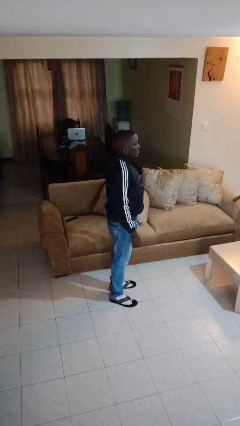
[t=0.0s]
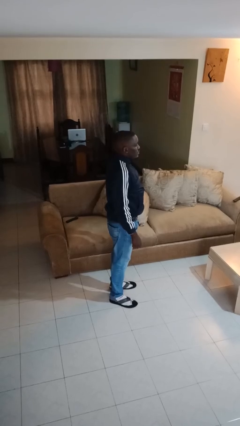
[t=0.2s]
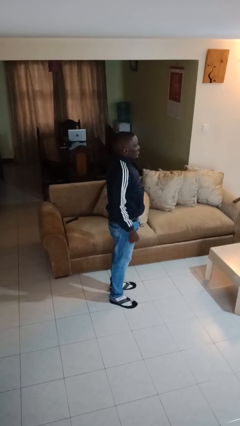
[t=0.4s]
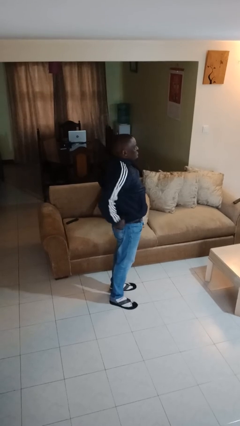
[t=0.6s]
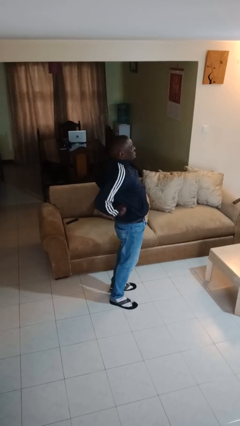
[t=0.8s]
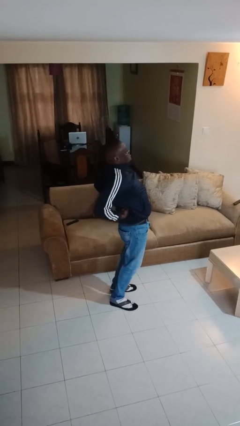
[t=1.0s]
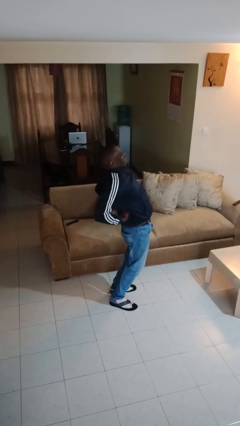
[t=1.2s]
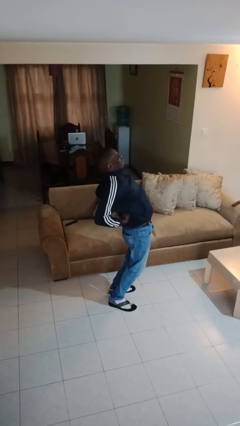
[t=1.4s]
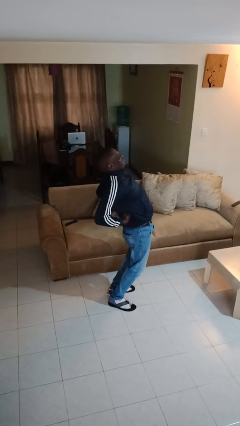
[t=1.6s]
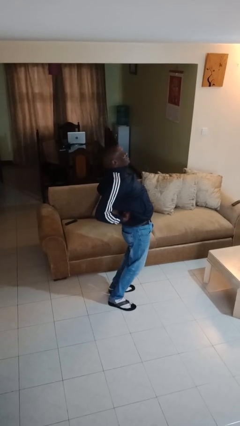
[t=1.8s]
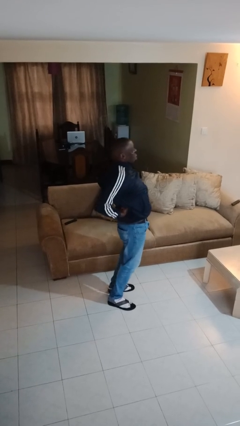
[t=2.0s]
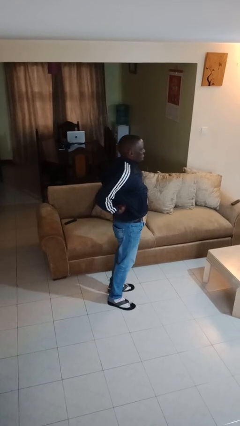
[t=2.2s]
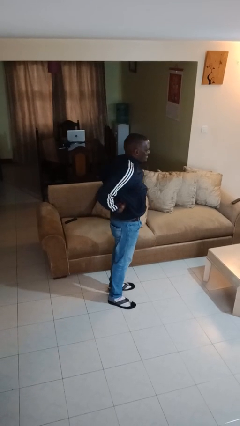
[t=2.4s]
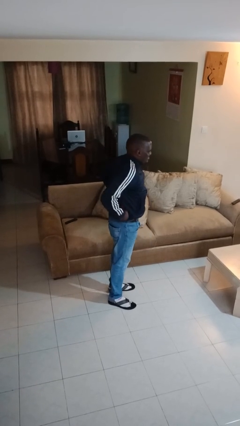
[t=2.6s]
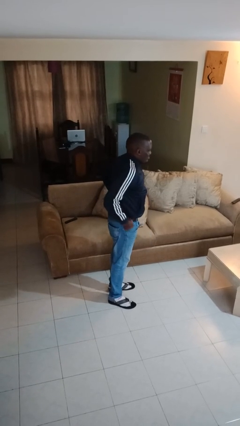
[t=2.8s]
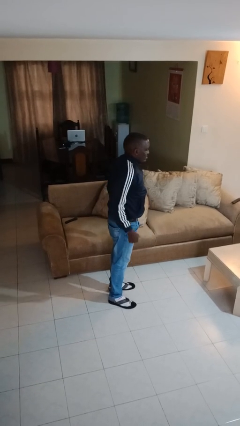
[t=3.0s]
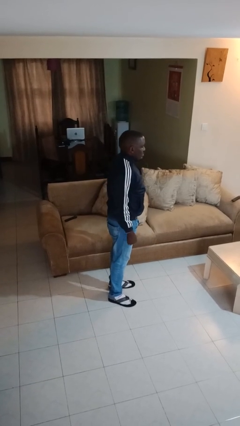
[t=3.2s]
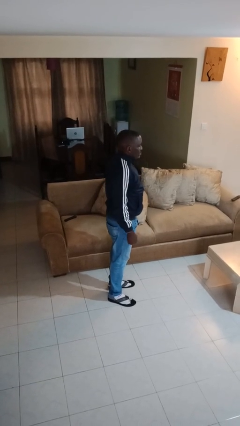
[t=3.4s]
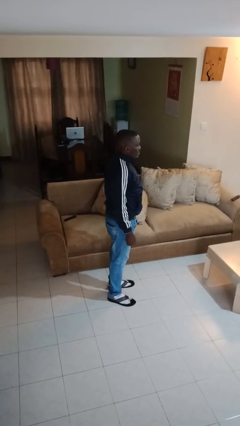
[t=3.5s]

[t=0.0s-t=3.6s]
person stretches back

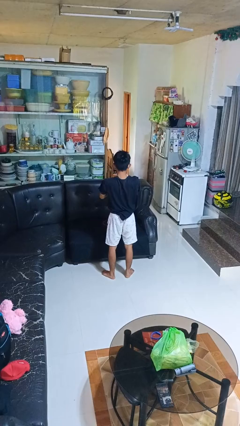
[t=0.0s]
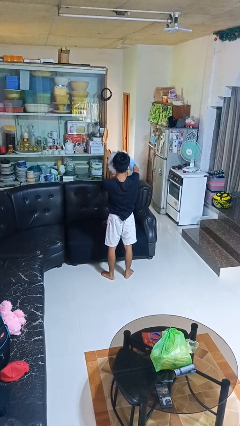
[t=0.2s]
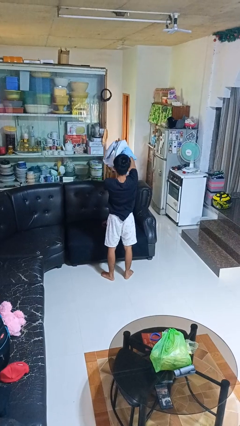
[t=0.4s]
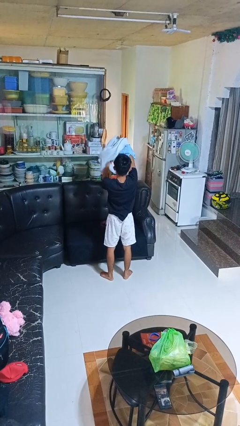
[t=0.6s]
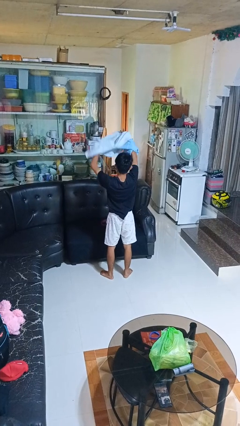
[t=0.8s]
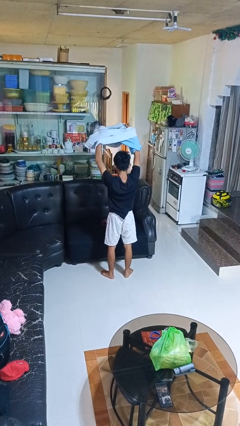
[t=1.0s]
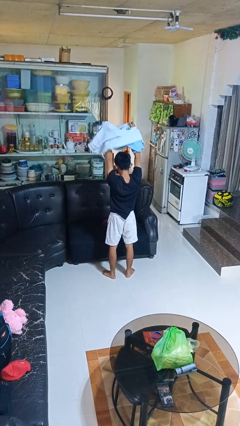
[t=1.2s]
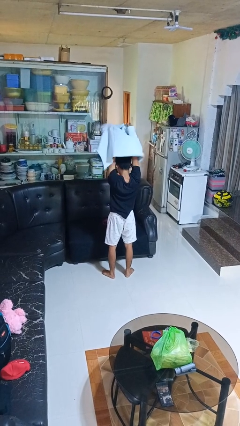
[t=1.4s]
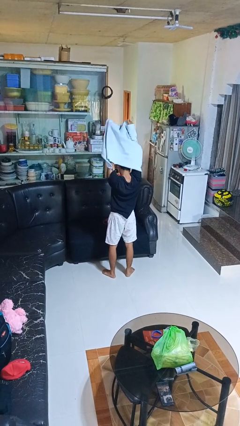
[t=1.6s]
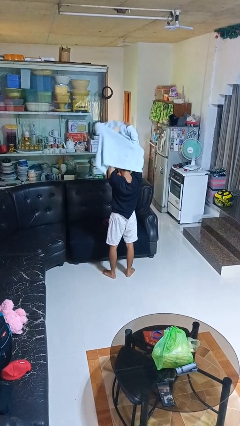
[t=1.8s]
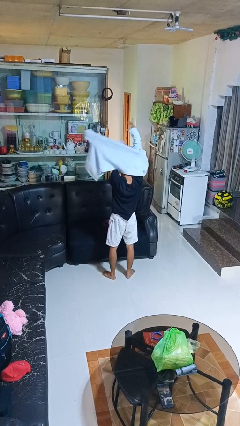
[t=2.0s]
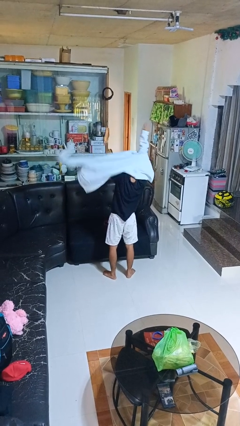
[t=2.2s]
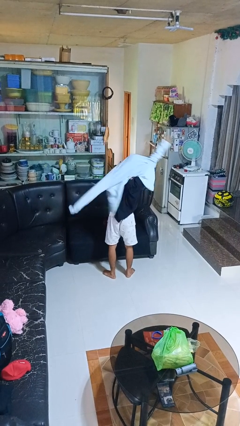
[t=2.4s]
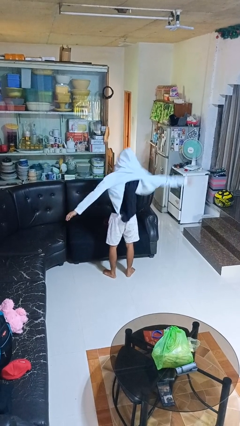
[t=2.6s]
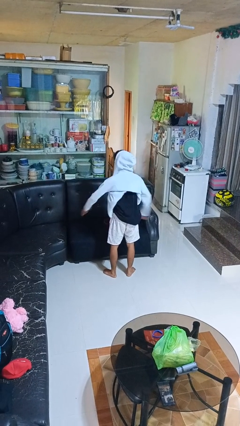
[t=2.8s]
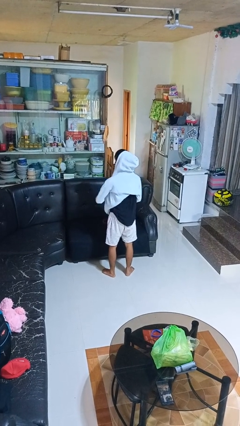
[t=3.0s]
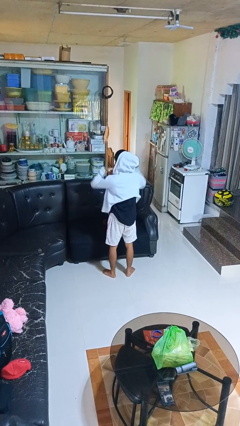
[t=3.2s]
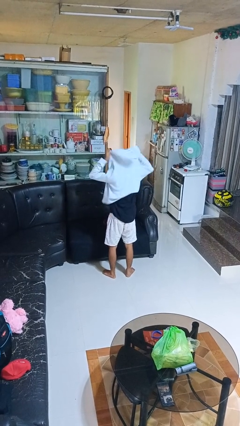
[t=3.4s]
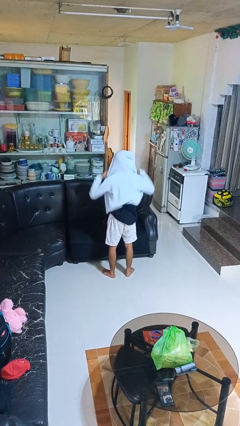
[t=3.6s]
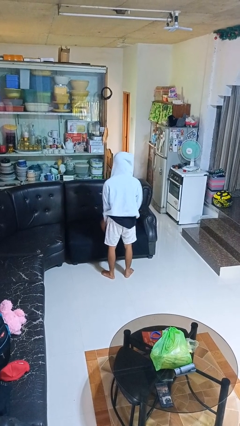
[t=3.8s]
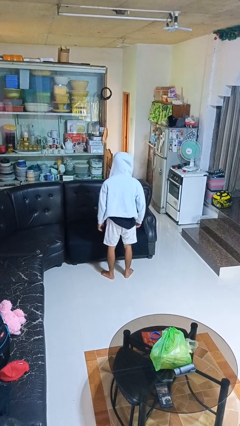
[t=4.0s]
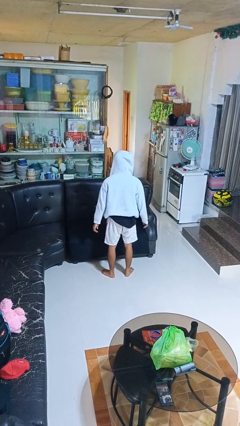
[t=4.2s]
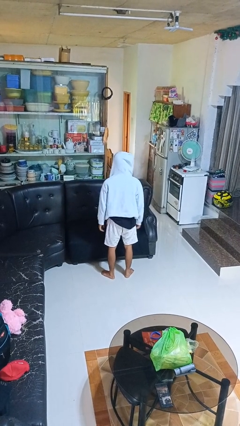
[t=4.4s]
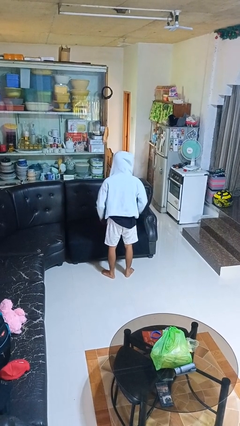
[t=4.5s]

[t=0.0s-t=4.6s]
person puts on hoodie

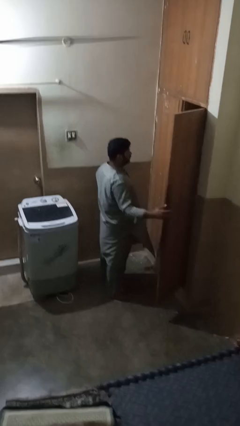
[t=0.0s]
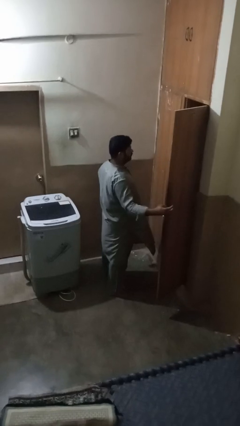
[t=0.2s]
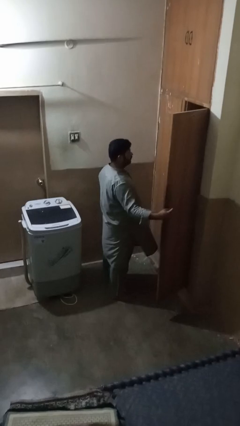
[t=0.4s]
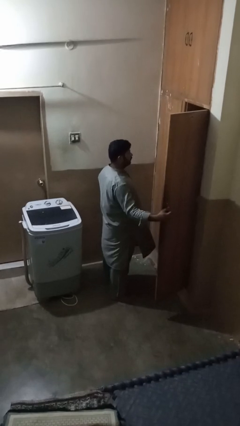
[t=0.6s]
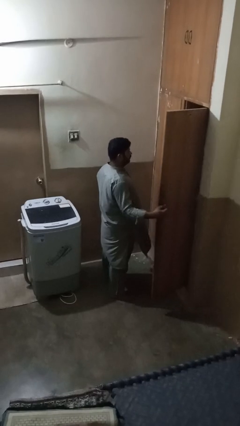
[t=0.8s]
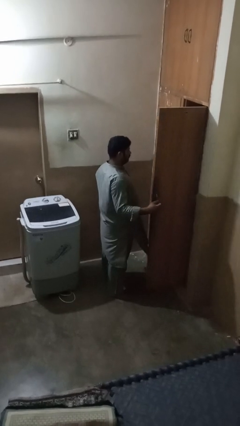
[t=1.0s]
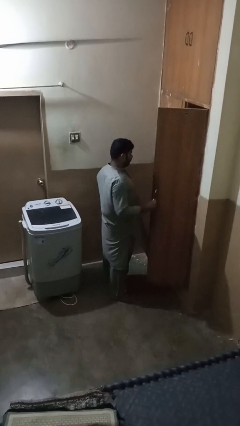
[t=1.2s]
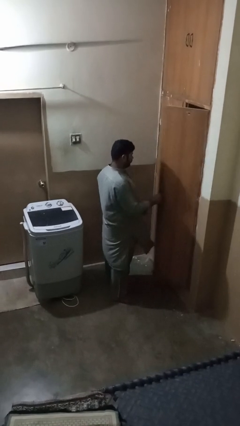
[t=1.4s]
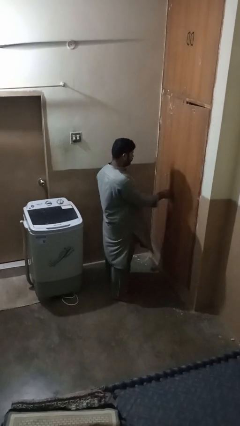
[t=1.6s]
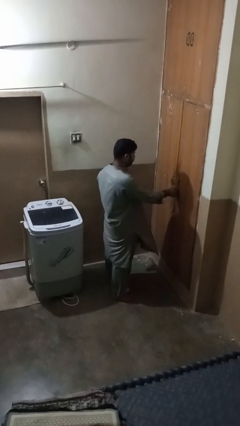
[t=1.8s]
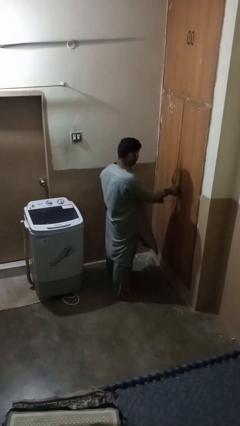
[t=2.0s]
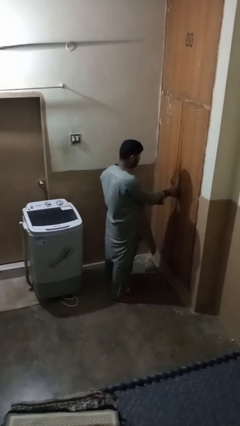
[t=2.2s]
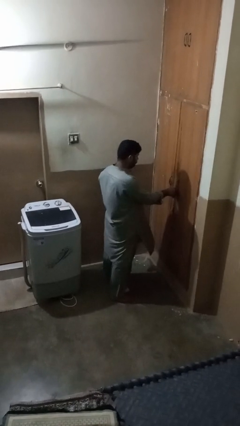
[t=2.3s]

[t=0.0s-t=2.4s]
person closes closet door

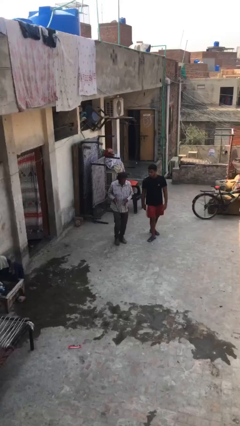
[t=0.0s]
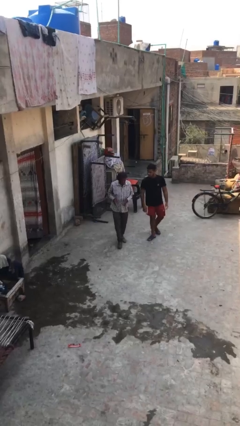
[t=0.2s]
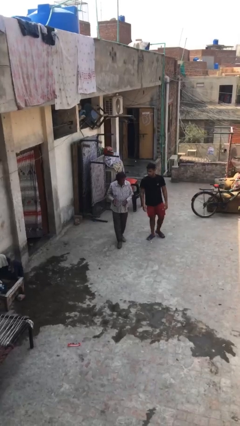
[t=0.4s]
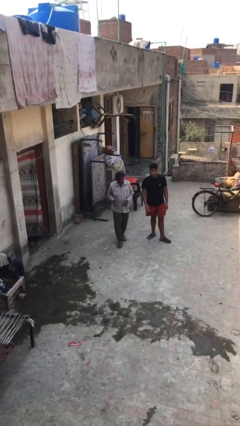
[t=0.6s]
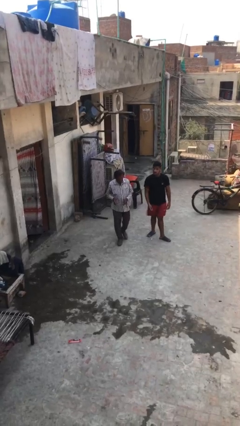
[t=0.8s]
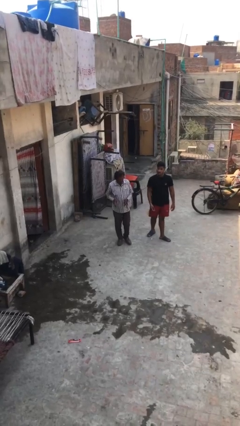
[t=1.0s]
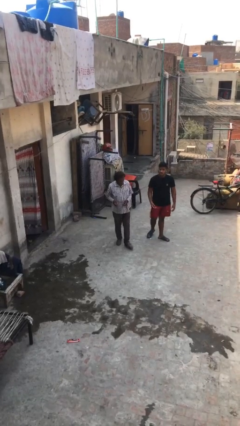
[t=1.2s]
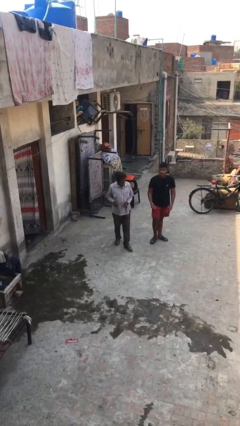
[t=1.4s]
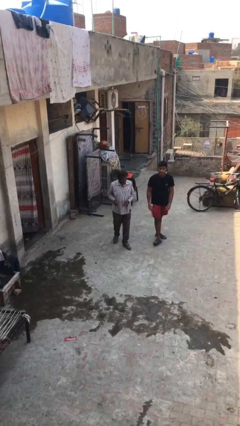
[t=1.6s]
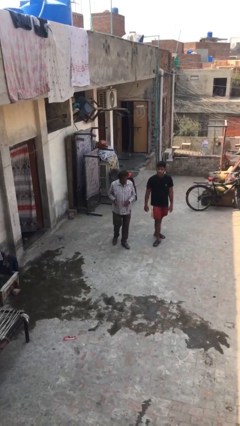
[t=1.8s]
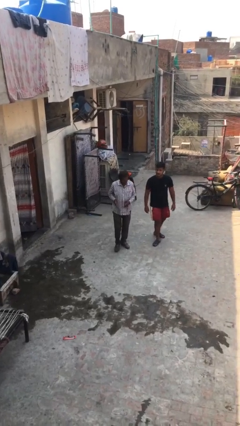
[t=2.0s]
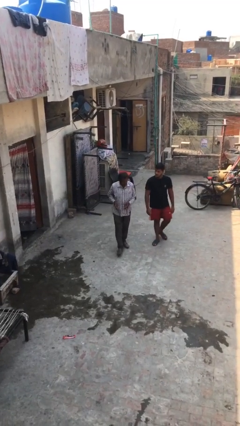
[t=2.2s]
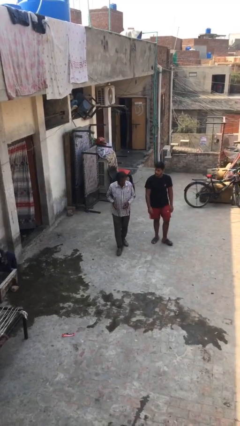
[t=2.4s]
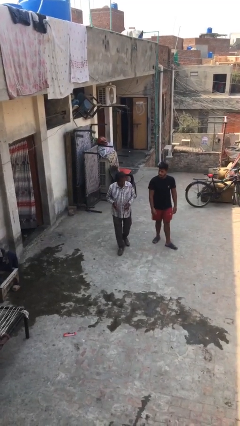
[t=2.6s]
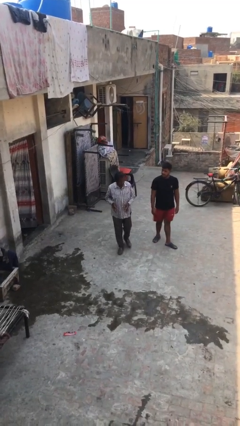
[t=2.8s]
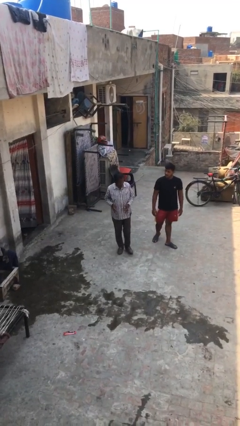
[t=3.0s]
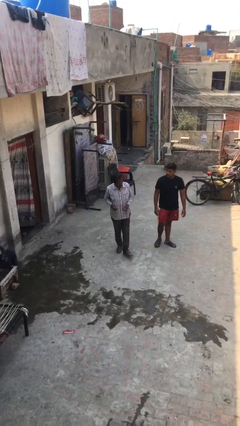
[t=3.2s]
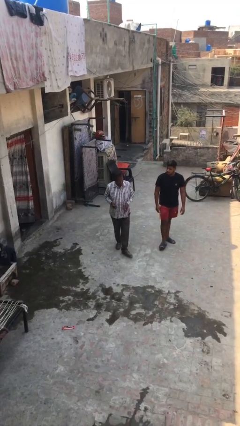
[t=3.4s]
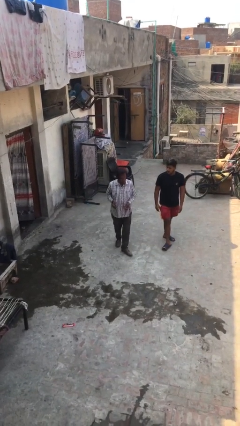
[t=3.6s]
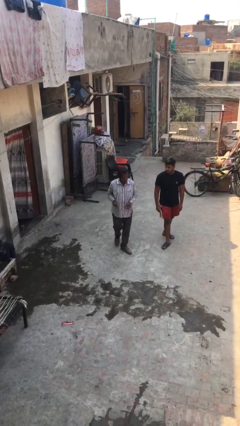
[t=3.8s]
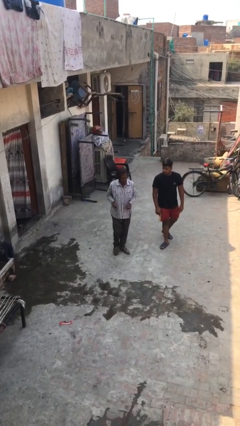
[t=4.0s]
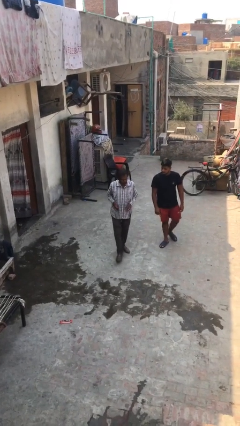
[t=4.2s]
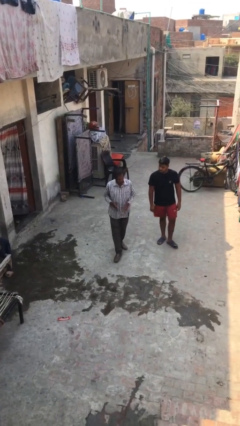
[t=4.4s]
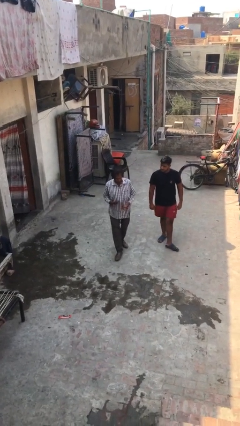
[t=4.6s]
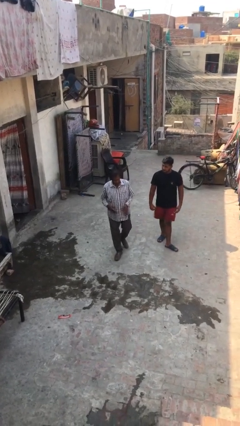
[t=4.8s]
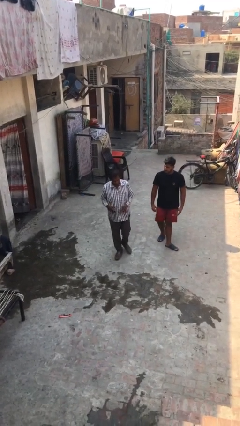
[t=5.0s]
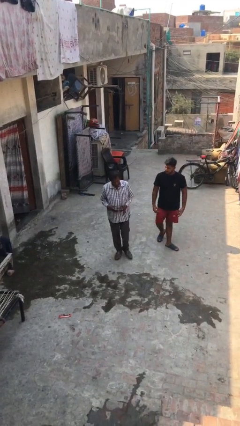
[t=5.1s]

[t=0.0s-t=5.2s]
person talks to person

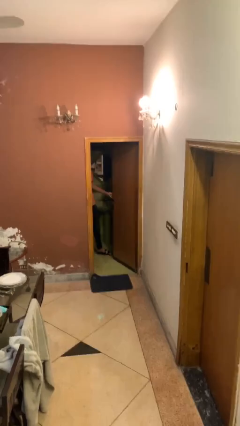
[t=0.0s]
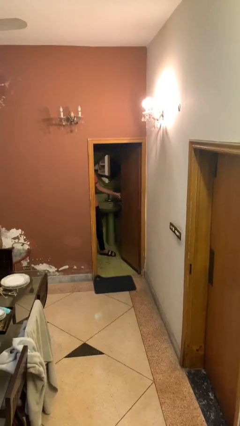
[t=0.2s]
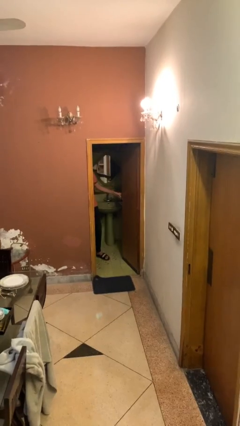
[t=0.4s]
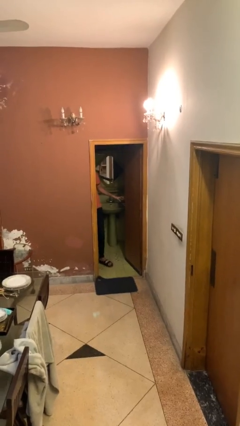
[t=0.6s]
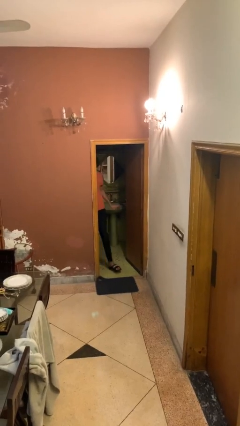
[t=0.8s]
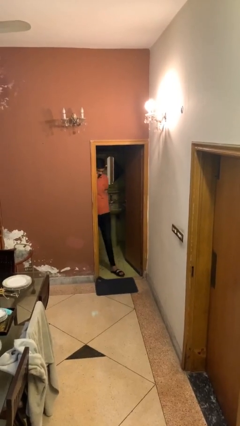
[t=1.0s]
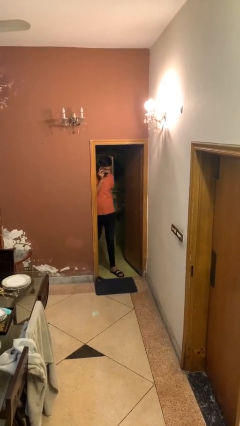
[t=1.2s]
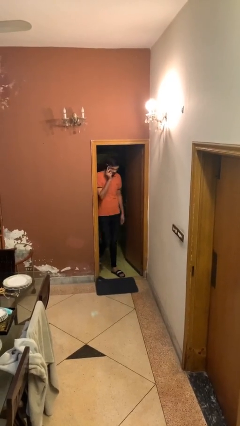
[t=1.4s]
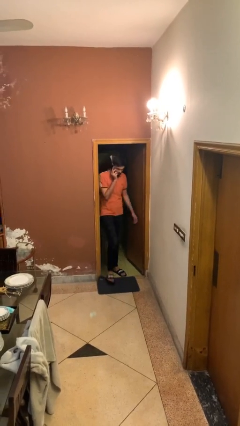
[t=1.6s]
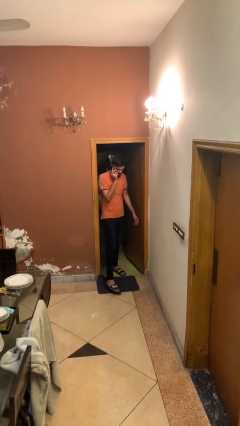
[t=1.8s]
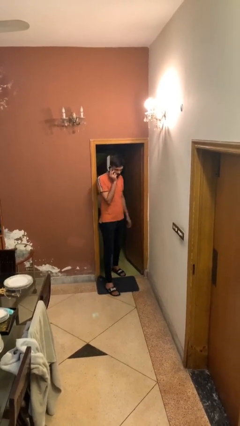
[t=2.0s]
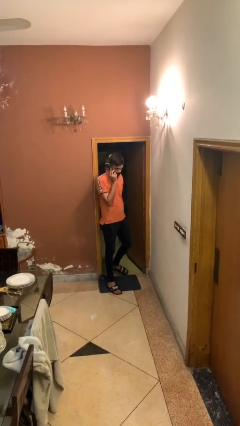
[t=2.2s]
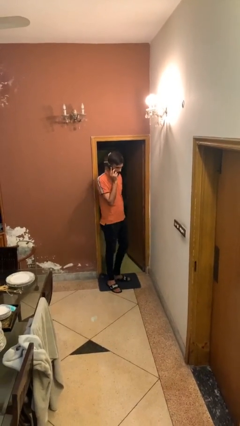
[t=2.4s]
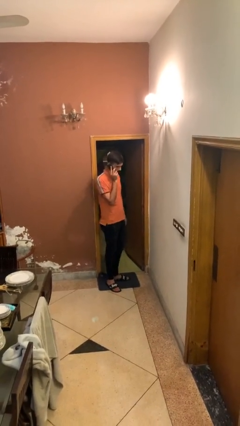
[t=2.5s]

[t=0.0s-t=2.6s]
person enters scene through structure
